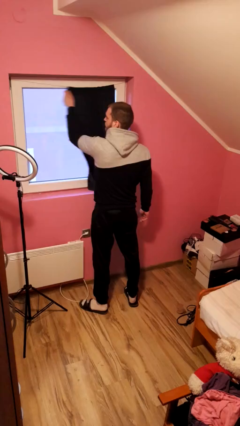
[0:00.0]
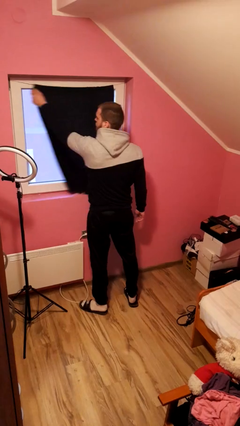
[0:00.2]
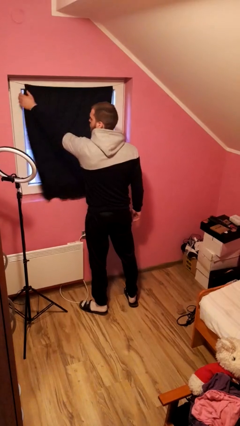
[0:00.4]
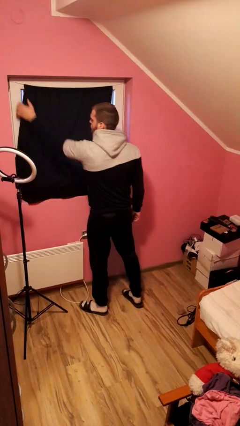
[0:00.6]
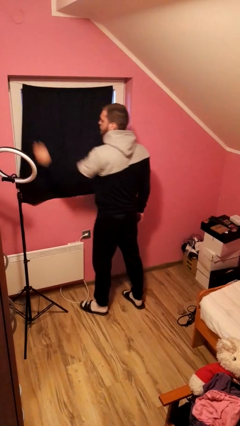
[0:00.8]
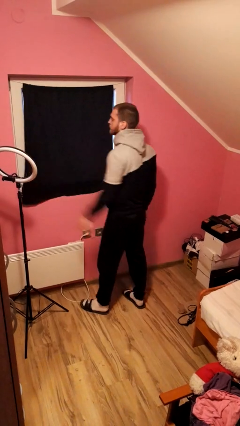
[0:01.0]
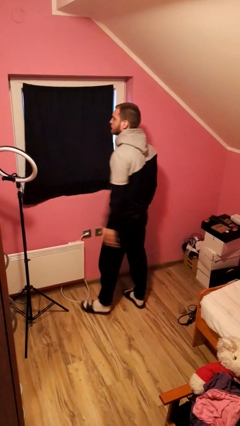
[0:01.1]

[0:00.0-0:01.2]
person closes curtains

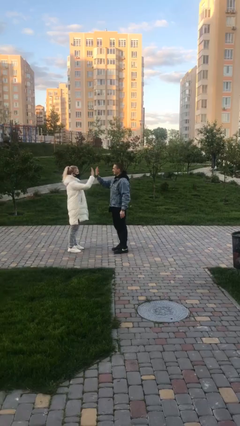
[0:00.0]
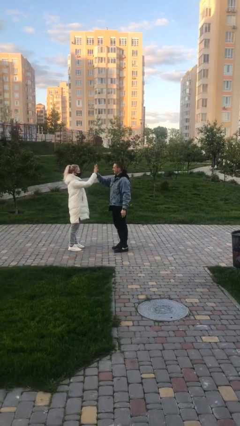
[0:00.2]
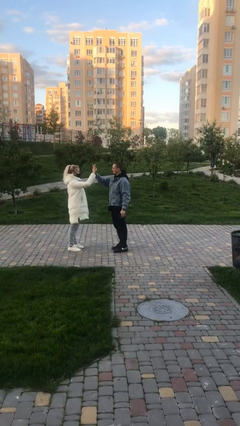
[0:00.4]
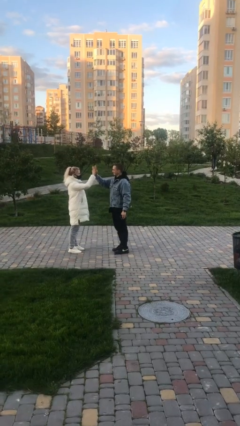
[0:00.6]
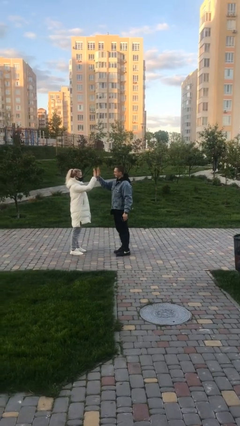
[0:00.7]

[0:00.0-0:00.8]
person highfives hand

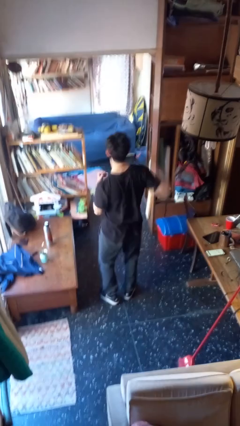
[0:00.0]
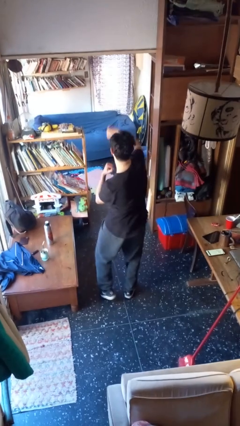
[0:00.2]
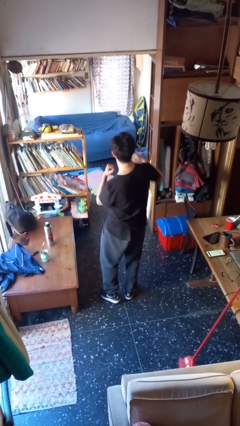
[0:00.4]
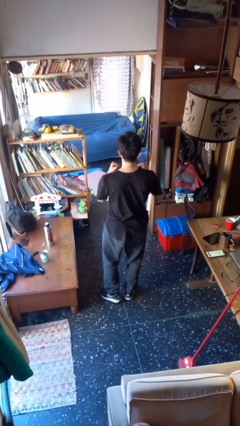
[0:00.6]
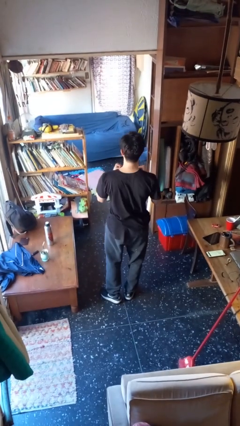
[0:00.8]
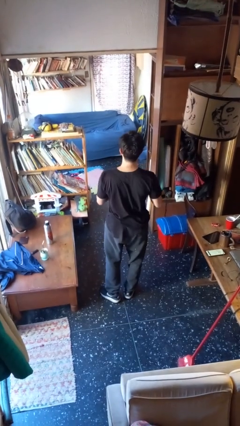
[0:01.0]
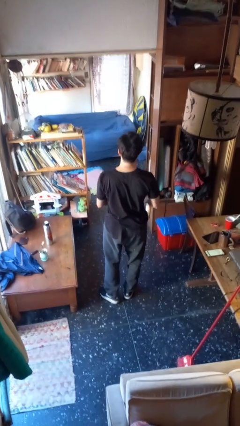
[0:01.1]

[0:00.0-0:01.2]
person karate chop

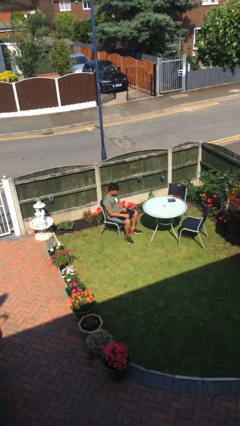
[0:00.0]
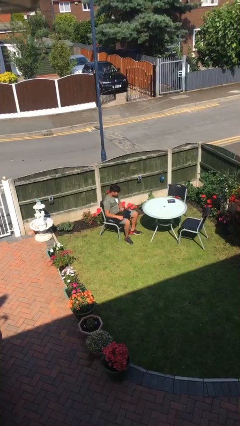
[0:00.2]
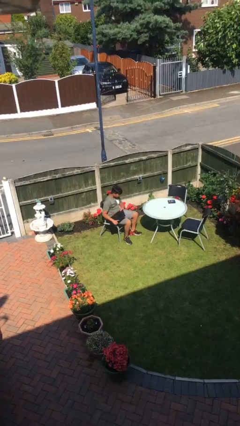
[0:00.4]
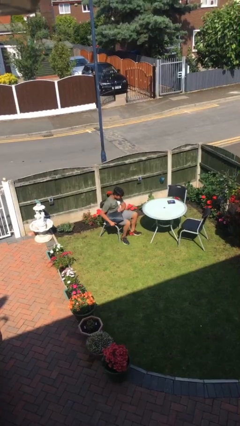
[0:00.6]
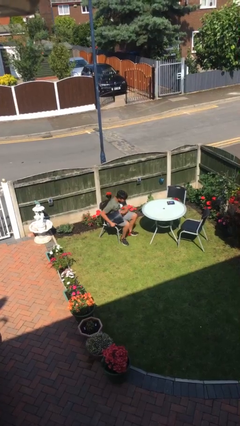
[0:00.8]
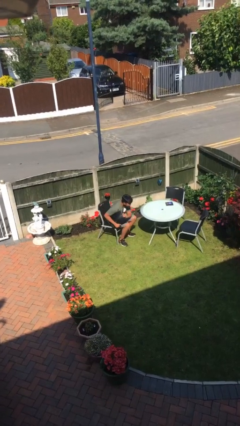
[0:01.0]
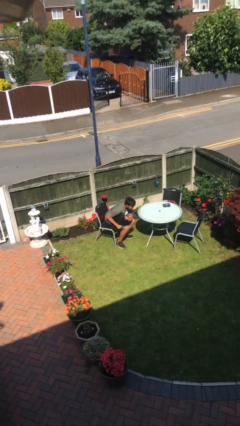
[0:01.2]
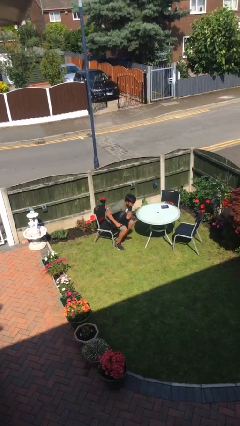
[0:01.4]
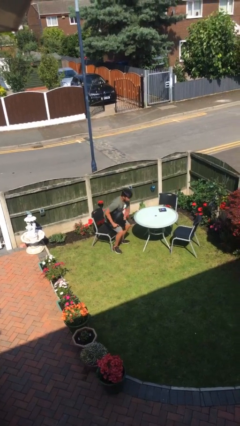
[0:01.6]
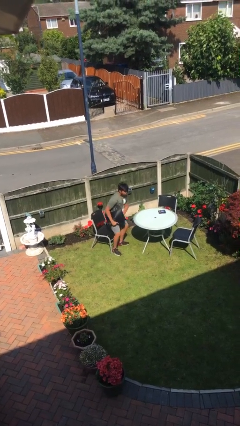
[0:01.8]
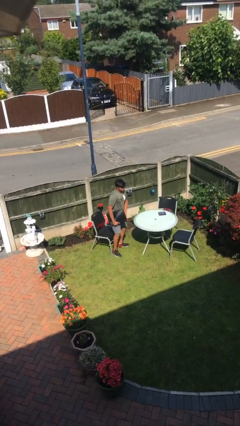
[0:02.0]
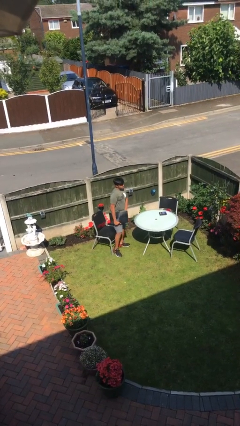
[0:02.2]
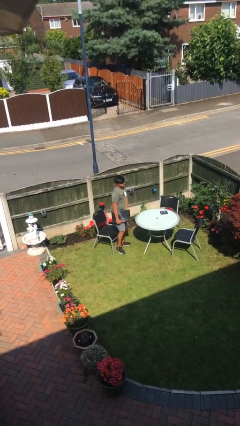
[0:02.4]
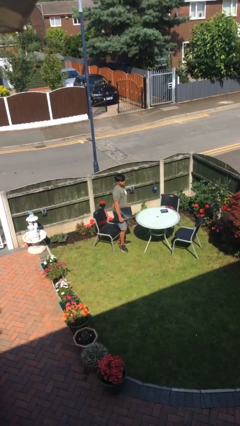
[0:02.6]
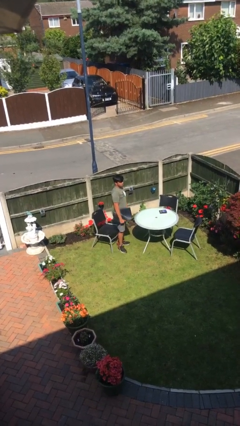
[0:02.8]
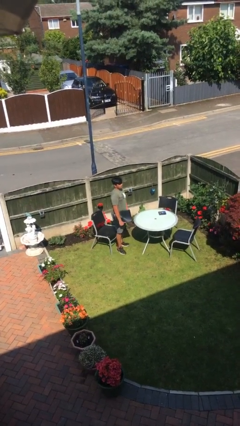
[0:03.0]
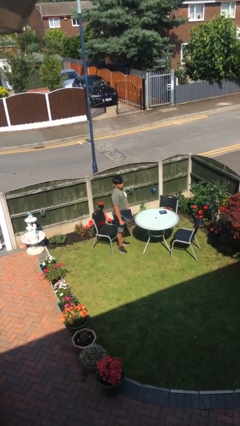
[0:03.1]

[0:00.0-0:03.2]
person stands up

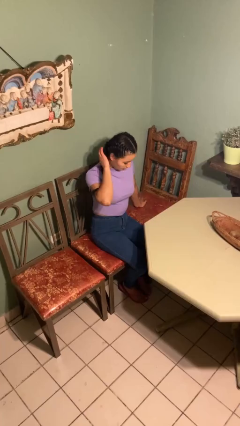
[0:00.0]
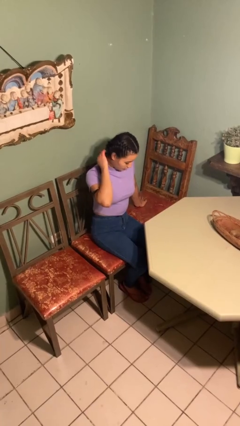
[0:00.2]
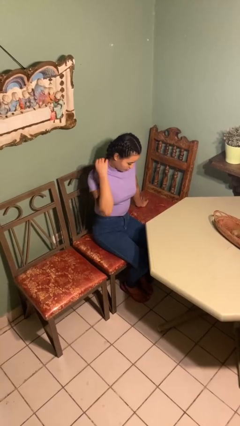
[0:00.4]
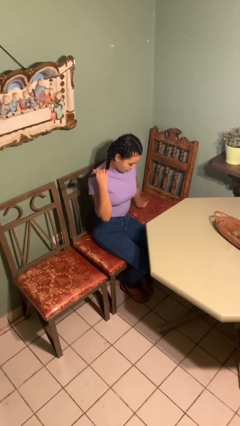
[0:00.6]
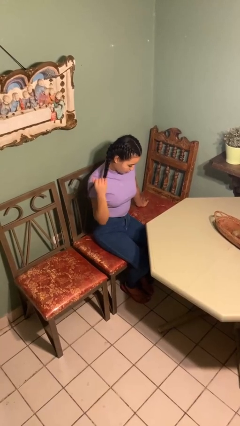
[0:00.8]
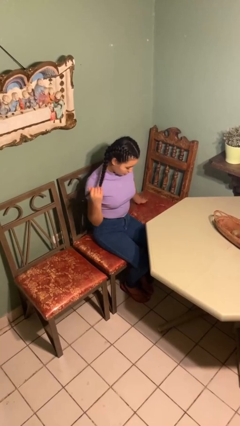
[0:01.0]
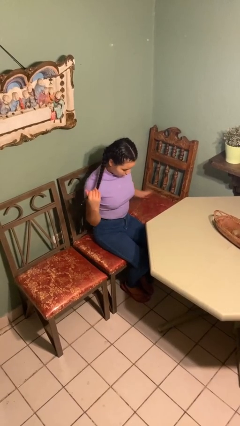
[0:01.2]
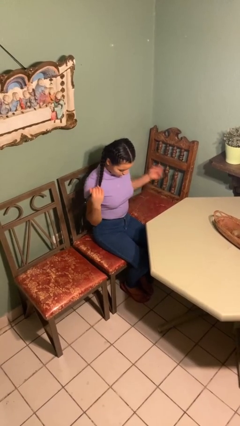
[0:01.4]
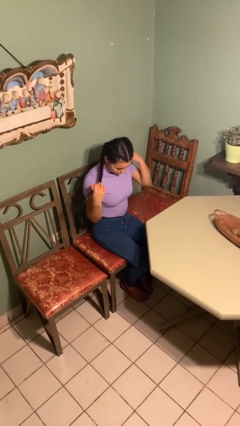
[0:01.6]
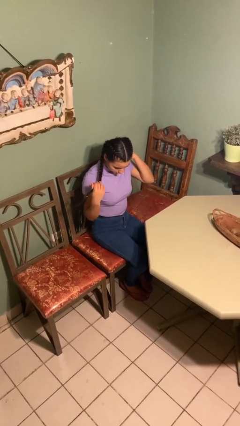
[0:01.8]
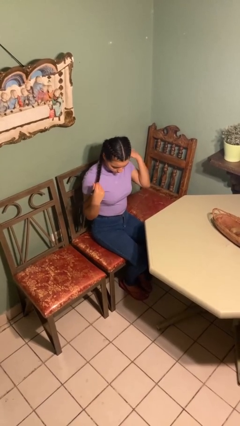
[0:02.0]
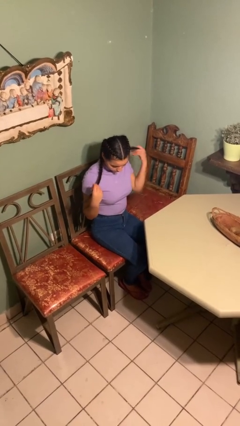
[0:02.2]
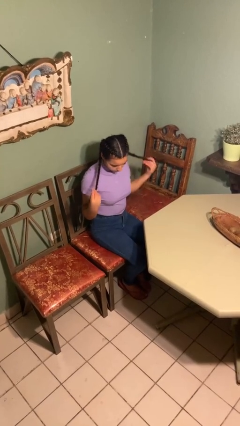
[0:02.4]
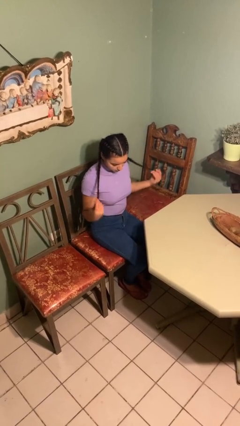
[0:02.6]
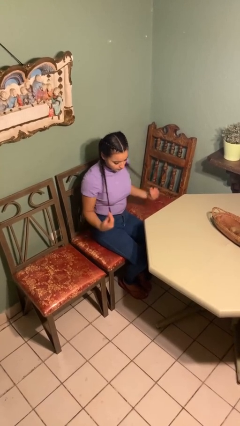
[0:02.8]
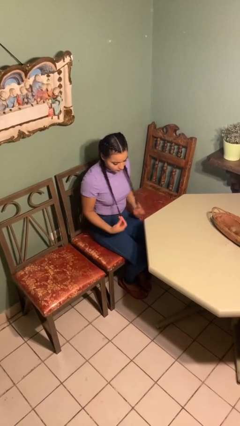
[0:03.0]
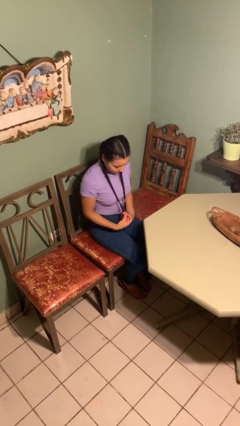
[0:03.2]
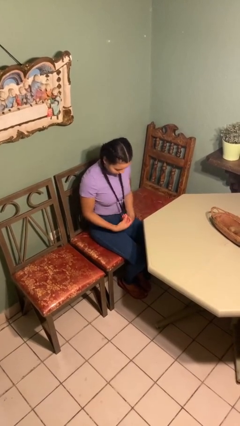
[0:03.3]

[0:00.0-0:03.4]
person strokes hair

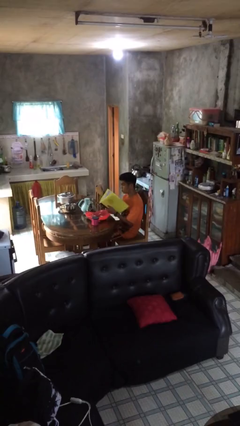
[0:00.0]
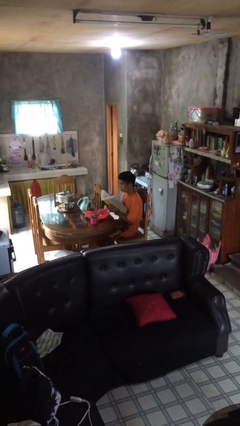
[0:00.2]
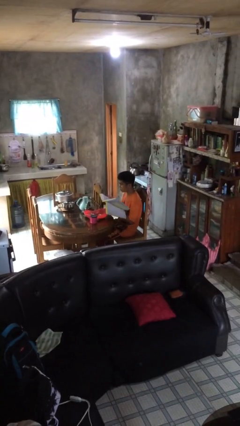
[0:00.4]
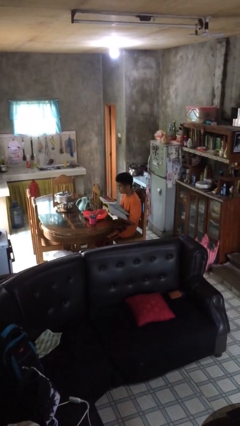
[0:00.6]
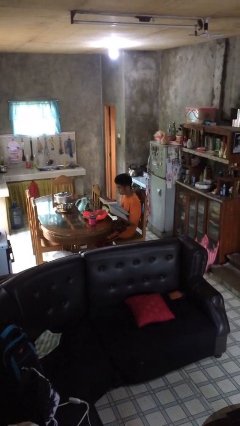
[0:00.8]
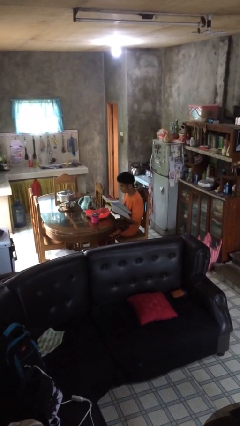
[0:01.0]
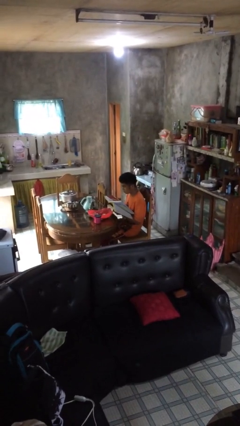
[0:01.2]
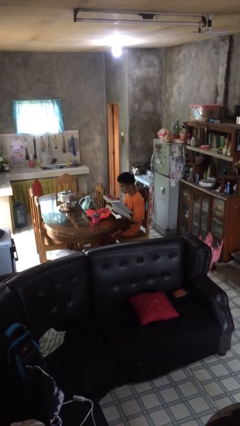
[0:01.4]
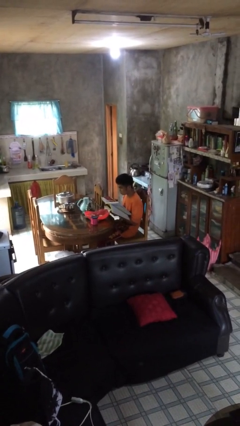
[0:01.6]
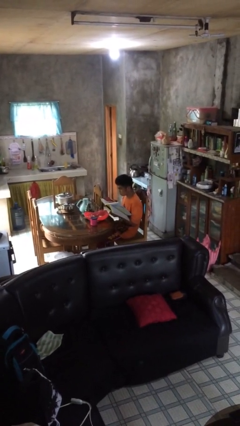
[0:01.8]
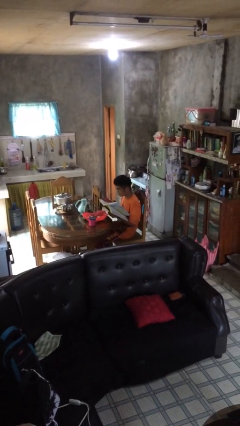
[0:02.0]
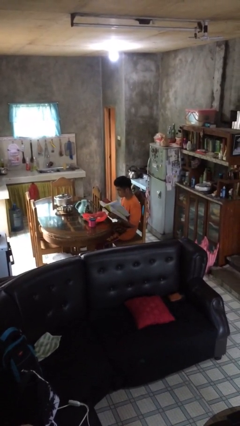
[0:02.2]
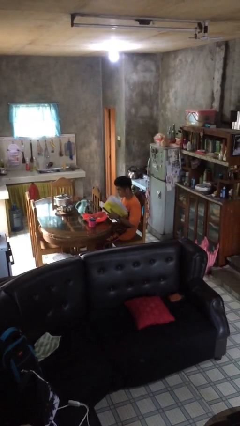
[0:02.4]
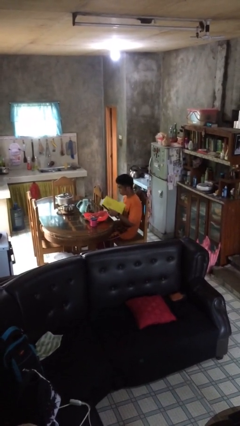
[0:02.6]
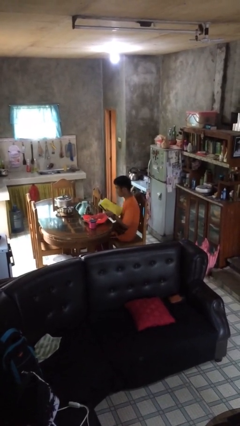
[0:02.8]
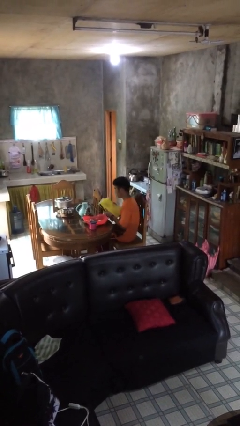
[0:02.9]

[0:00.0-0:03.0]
person reads document

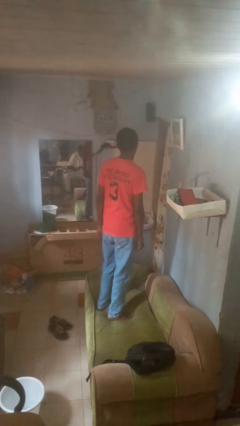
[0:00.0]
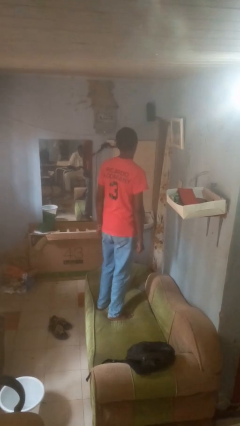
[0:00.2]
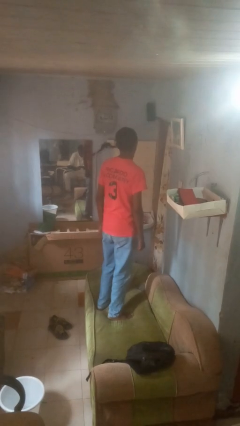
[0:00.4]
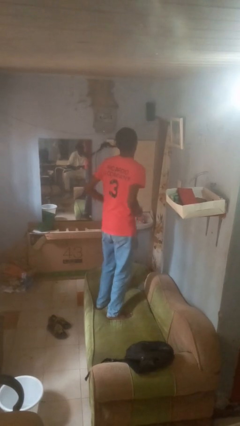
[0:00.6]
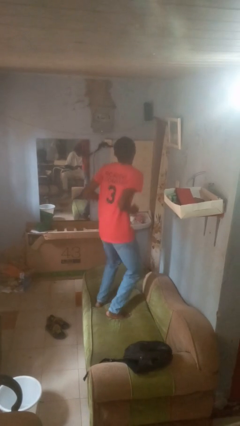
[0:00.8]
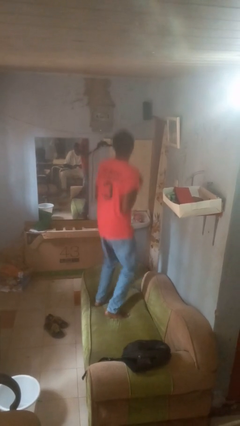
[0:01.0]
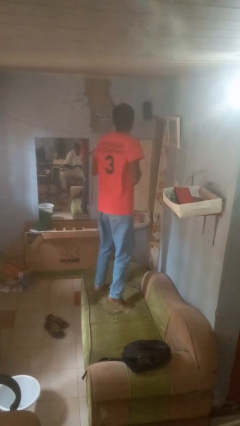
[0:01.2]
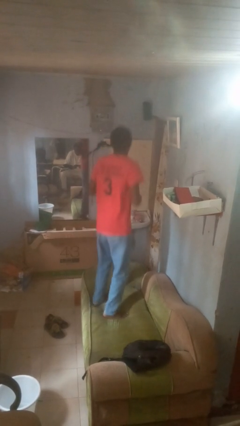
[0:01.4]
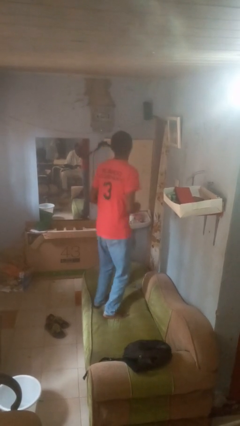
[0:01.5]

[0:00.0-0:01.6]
person jumps on couch

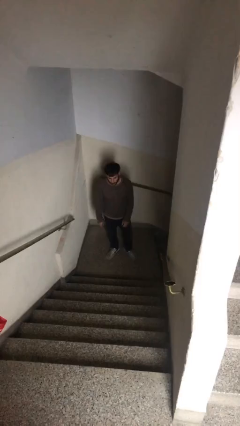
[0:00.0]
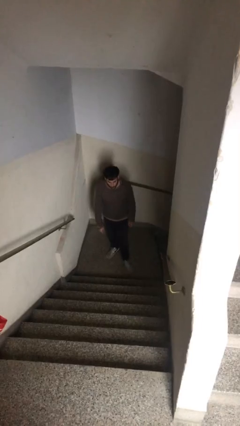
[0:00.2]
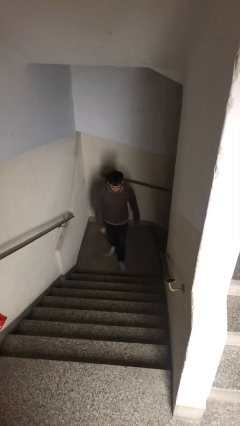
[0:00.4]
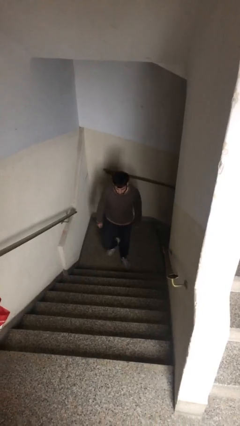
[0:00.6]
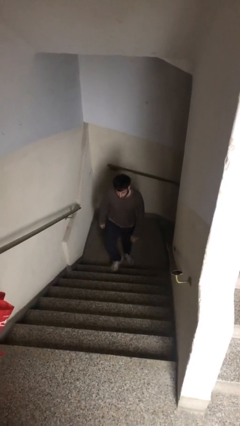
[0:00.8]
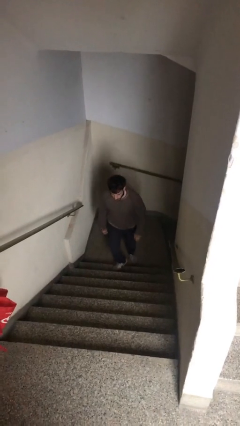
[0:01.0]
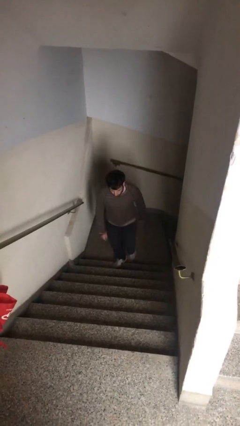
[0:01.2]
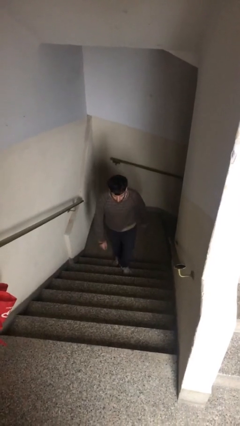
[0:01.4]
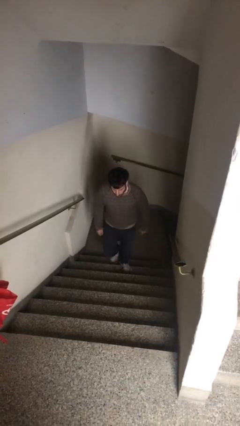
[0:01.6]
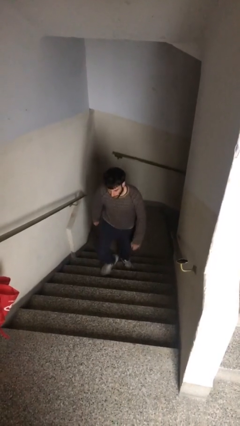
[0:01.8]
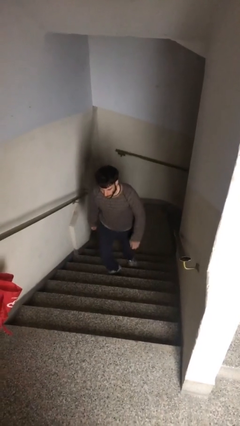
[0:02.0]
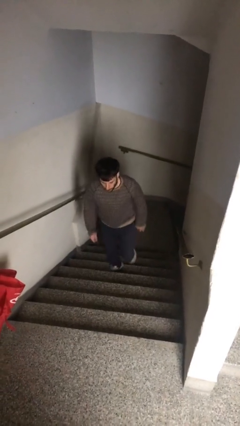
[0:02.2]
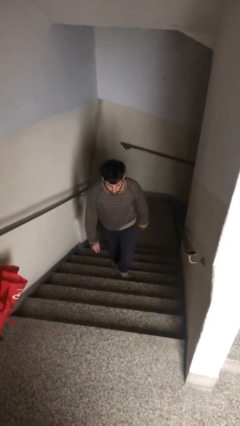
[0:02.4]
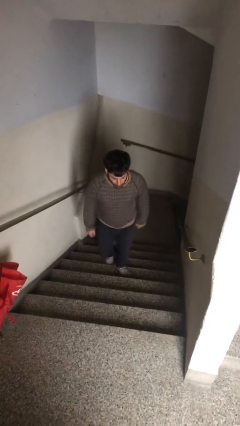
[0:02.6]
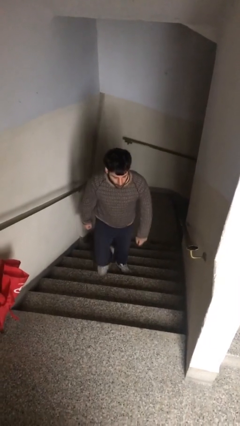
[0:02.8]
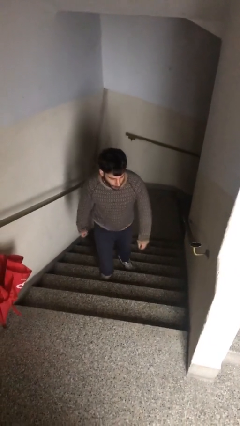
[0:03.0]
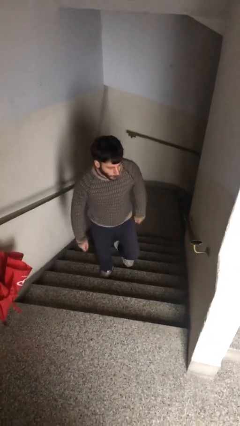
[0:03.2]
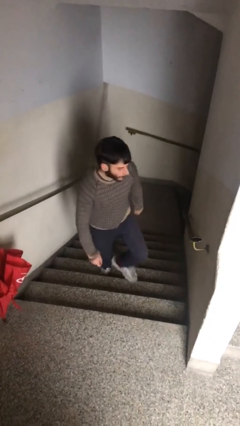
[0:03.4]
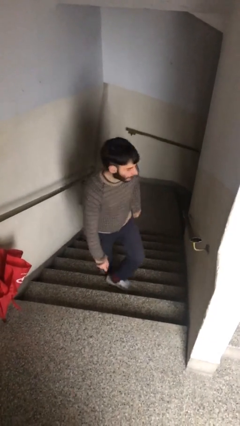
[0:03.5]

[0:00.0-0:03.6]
person climbs up stairs
